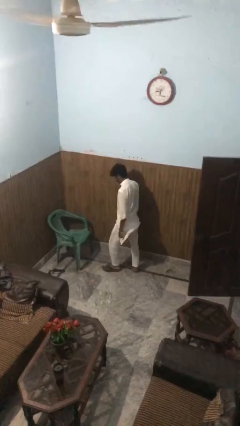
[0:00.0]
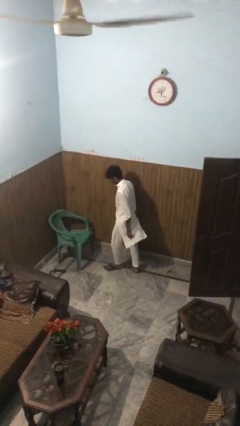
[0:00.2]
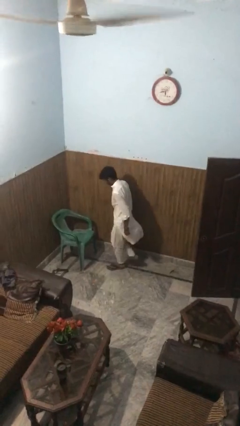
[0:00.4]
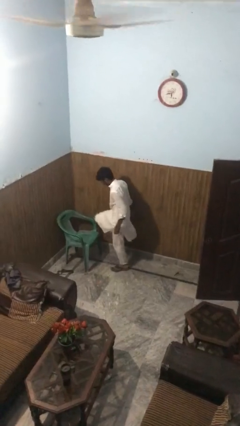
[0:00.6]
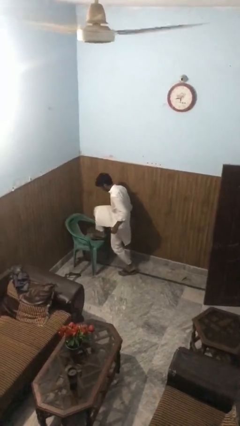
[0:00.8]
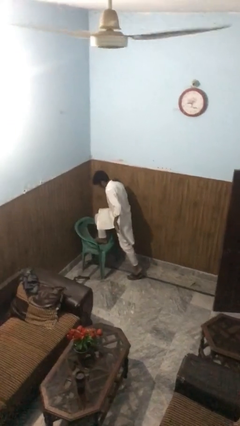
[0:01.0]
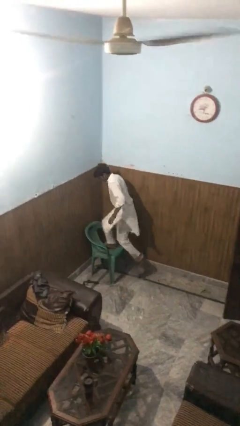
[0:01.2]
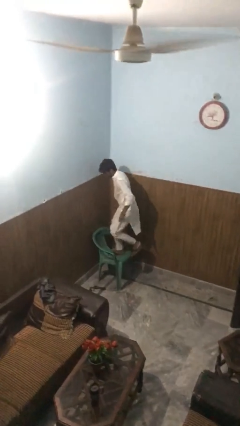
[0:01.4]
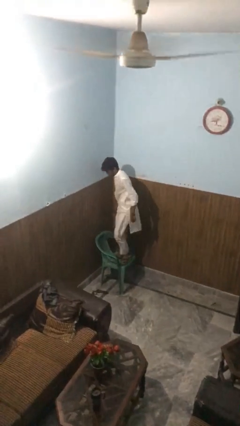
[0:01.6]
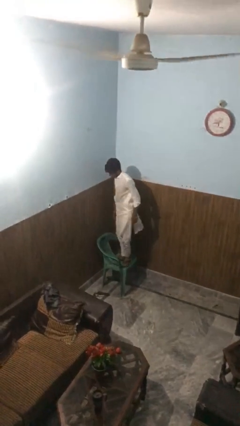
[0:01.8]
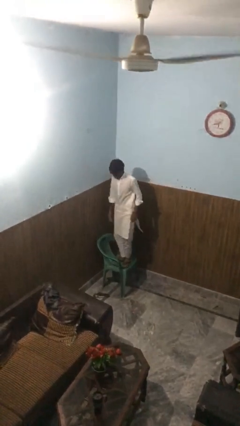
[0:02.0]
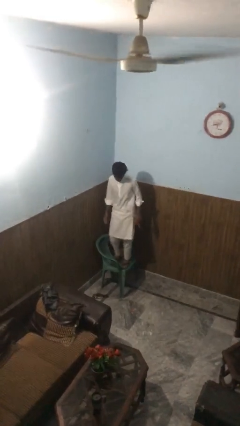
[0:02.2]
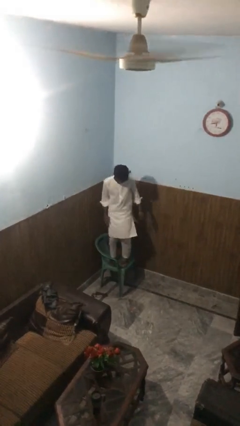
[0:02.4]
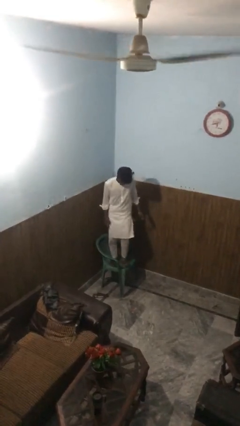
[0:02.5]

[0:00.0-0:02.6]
person climbs on chair

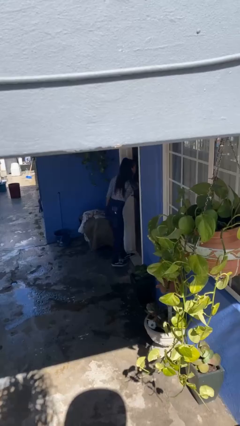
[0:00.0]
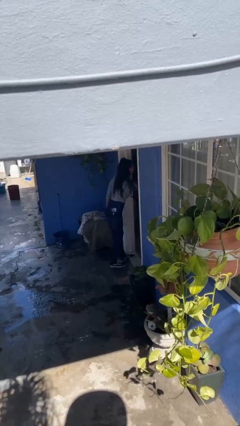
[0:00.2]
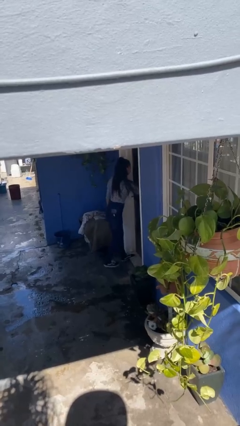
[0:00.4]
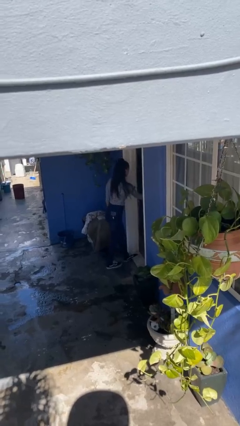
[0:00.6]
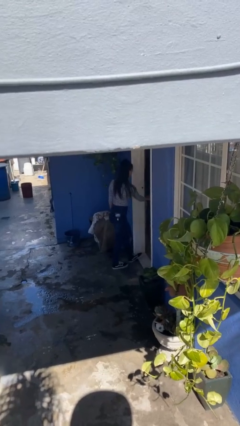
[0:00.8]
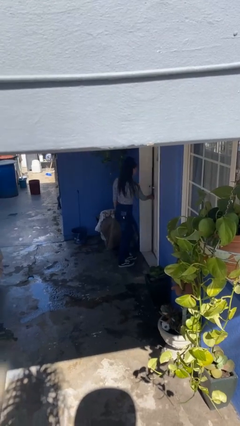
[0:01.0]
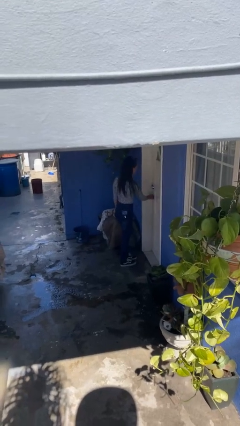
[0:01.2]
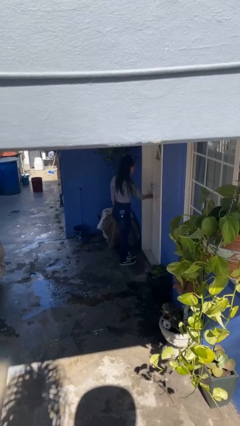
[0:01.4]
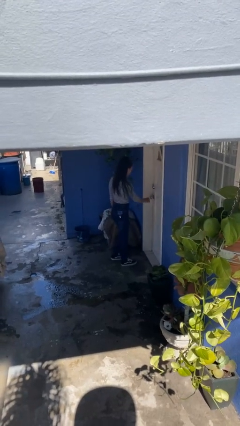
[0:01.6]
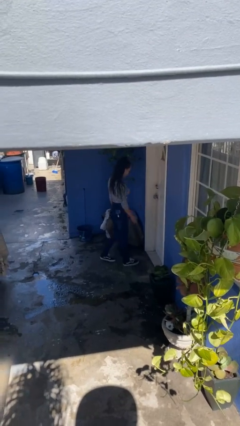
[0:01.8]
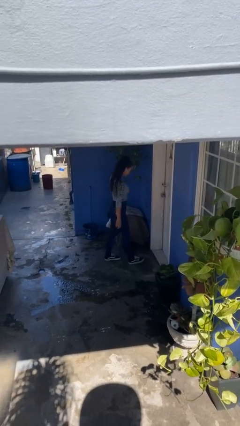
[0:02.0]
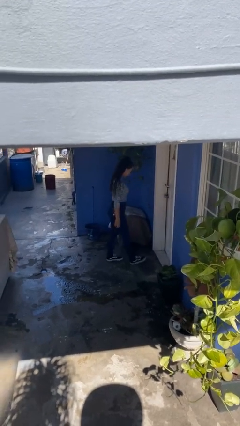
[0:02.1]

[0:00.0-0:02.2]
person closes facility door

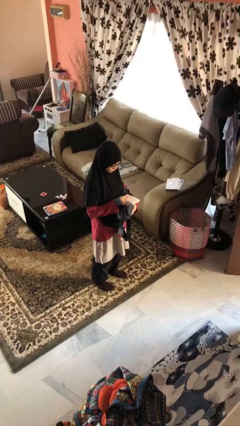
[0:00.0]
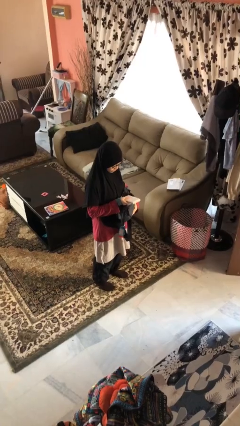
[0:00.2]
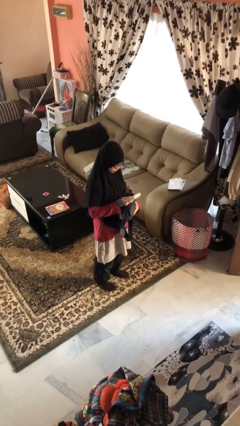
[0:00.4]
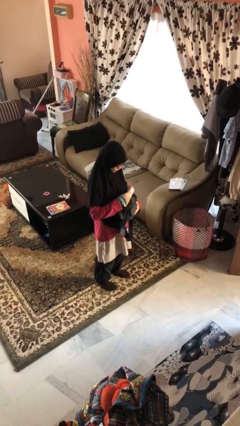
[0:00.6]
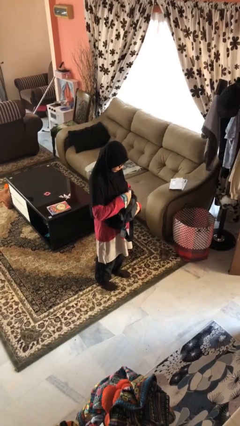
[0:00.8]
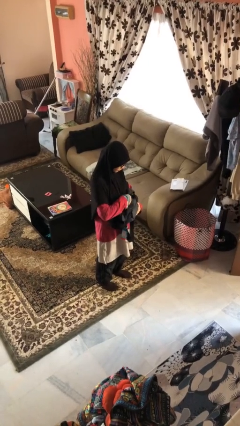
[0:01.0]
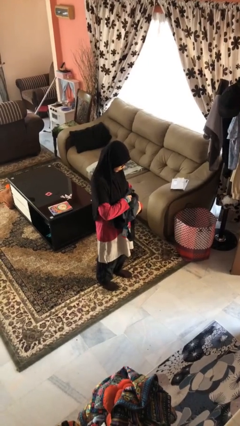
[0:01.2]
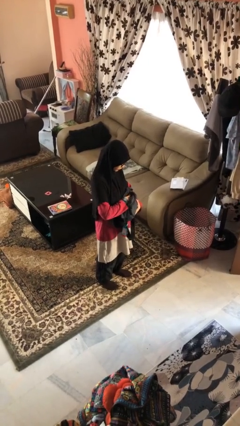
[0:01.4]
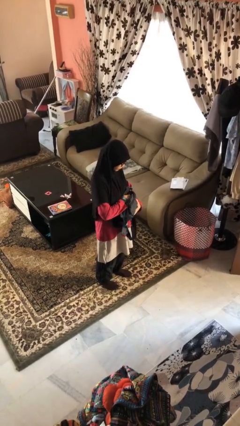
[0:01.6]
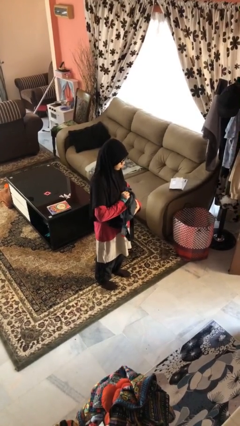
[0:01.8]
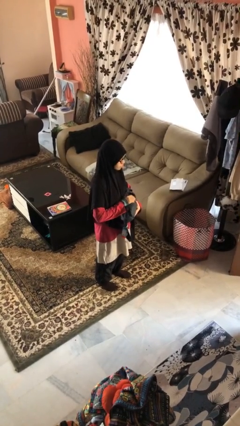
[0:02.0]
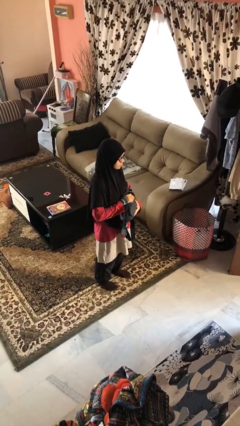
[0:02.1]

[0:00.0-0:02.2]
person puts object into purse

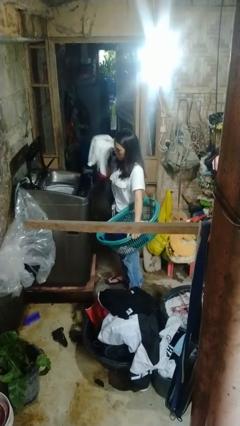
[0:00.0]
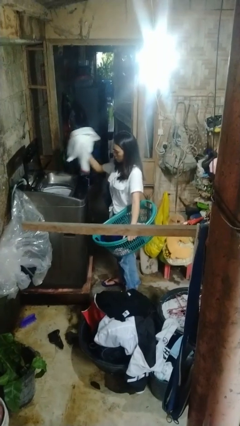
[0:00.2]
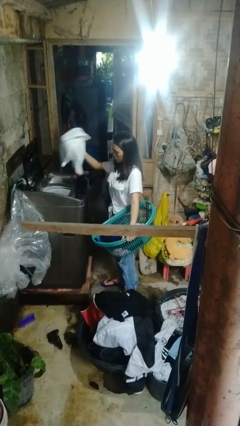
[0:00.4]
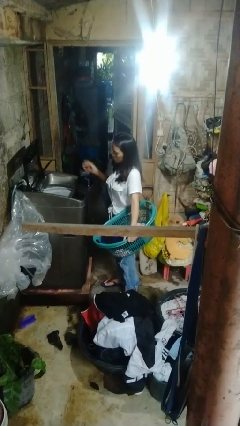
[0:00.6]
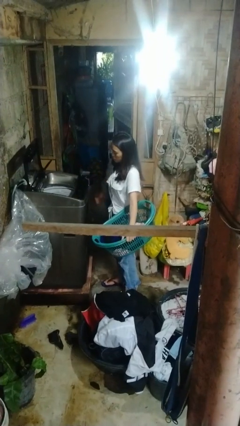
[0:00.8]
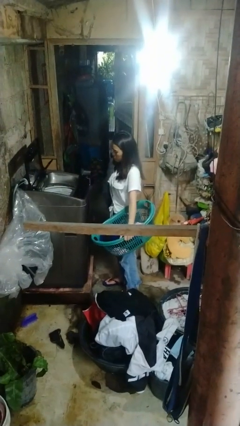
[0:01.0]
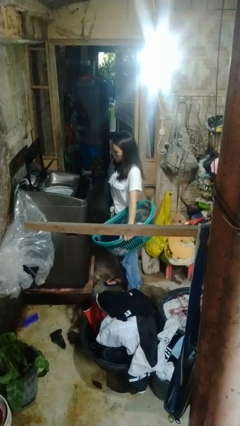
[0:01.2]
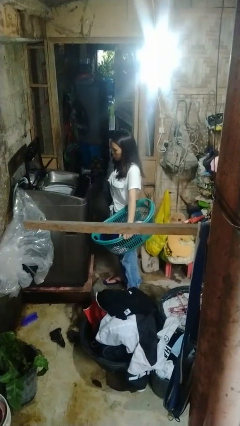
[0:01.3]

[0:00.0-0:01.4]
person loads clotheswasher

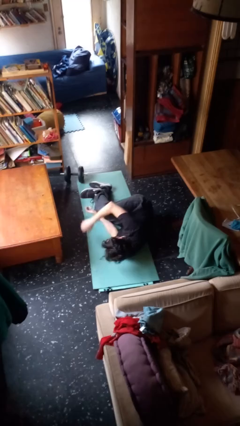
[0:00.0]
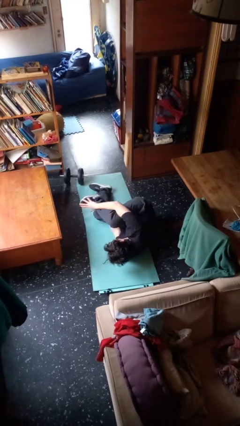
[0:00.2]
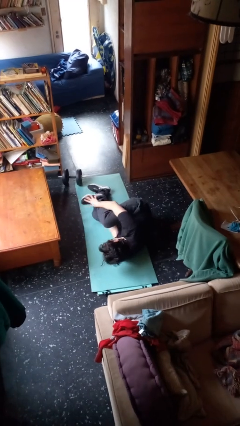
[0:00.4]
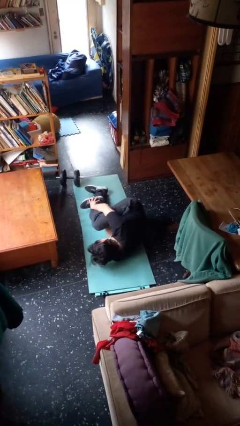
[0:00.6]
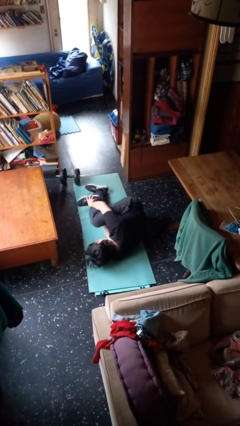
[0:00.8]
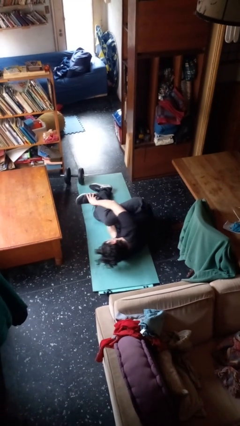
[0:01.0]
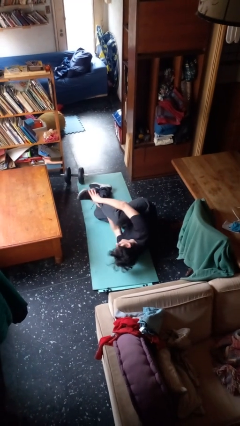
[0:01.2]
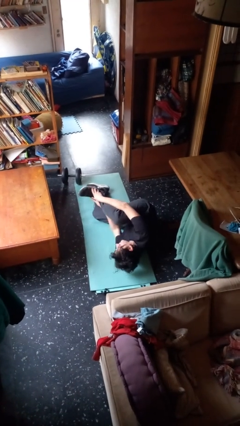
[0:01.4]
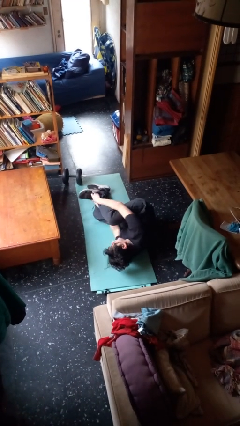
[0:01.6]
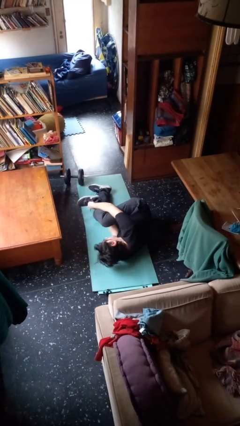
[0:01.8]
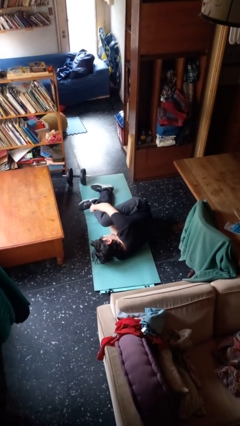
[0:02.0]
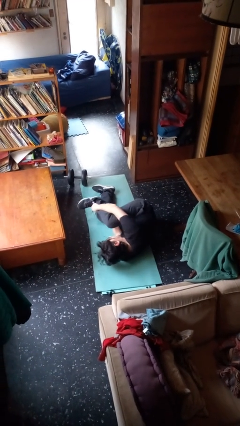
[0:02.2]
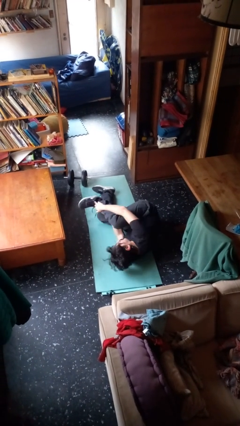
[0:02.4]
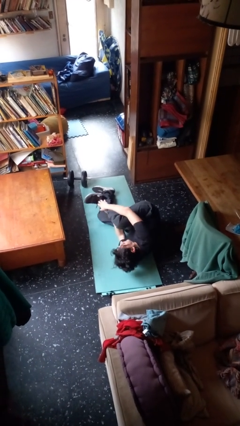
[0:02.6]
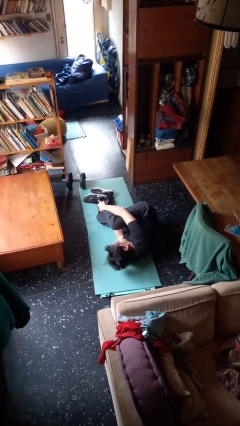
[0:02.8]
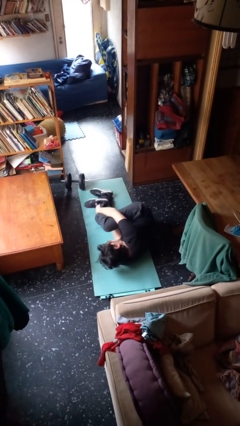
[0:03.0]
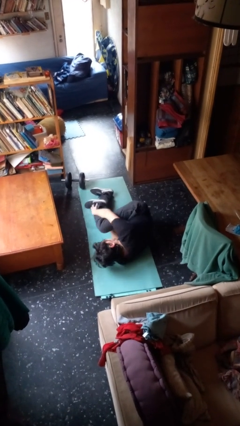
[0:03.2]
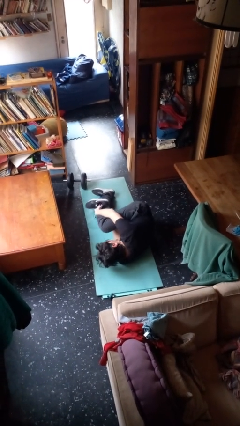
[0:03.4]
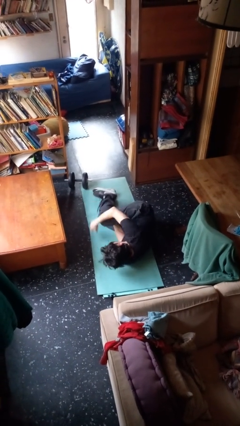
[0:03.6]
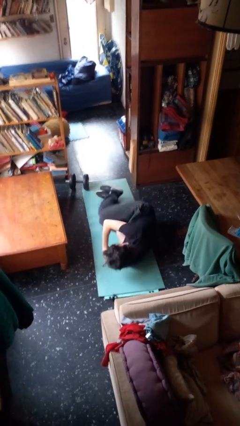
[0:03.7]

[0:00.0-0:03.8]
person lies down on floor

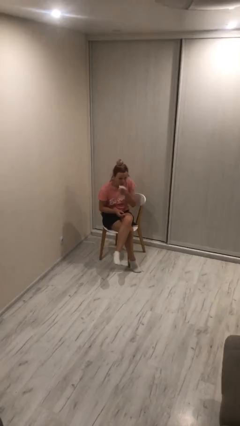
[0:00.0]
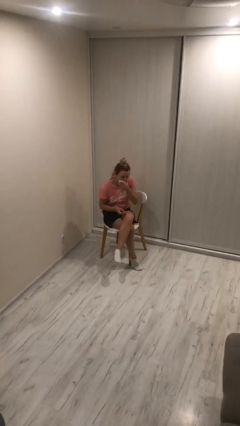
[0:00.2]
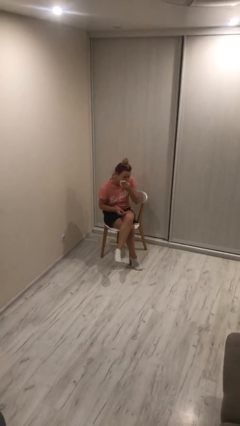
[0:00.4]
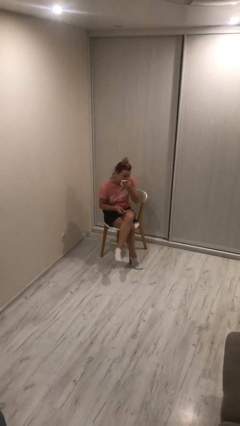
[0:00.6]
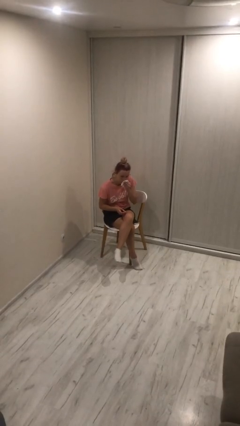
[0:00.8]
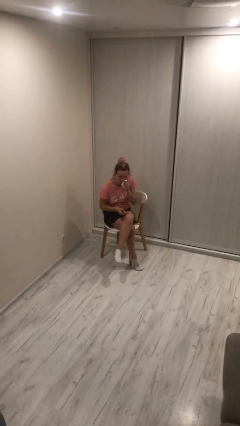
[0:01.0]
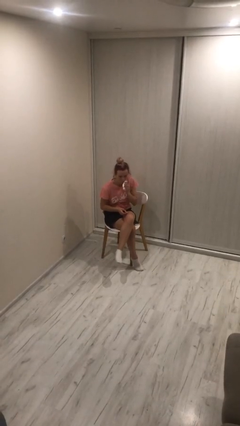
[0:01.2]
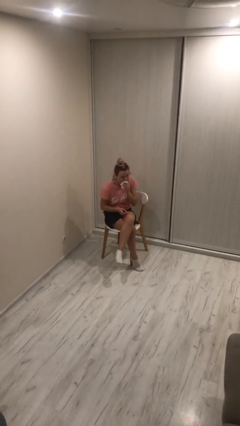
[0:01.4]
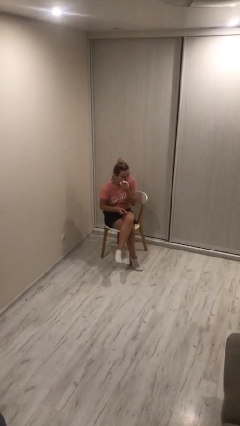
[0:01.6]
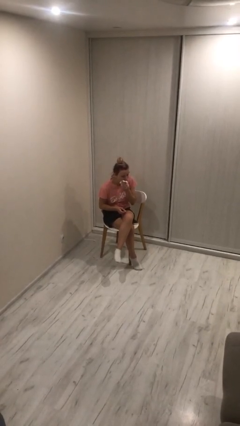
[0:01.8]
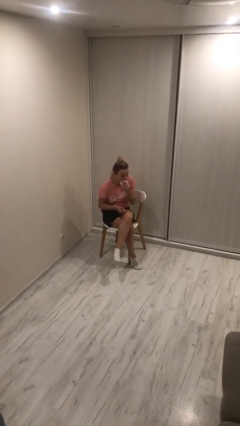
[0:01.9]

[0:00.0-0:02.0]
person wipes mouth with napkin

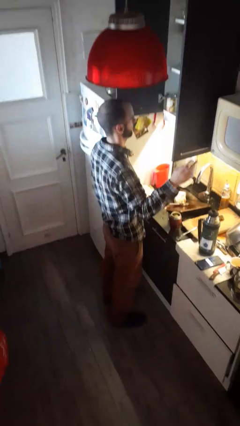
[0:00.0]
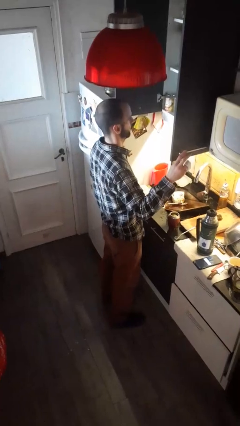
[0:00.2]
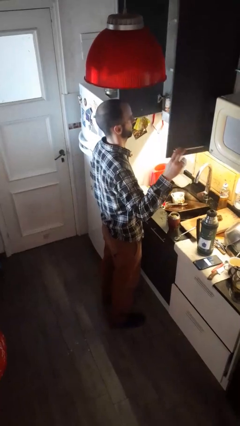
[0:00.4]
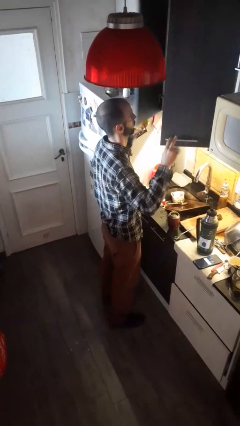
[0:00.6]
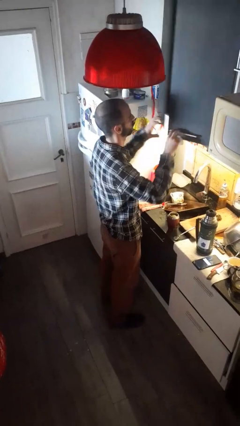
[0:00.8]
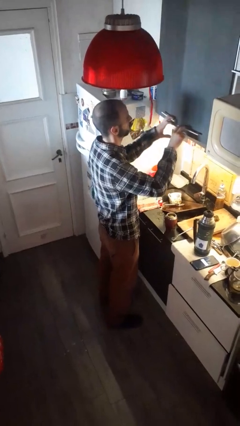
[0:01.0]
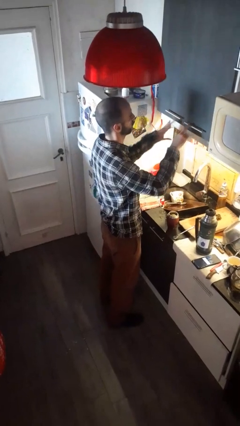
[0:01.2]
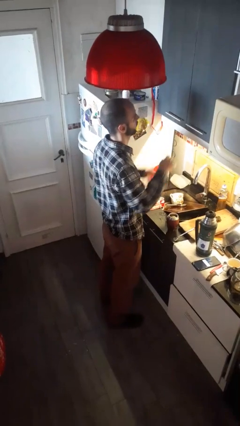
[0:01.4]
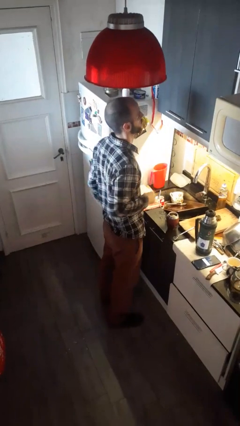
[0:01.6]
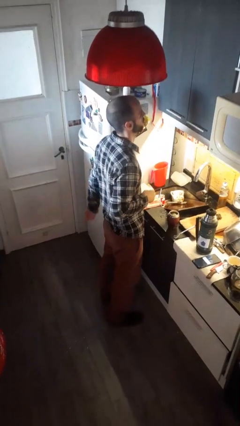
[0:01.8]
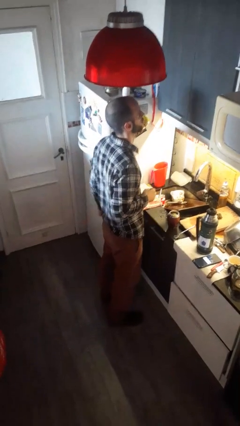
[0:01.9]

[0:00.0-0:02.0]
person closes kitchen drawer

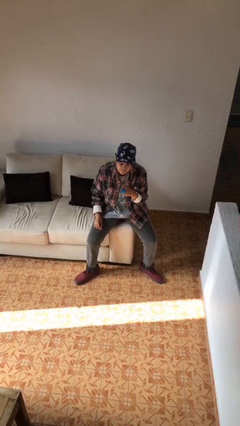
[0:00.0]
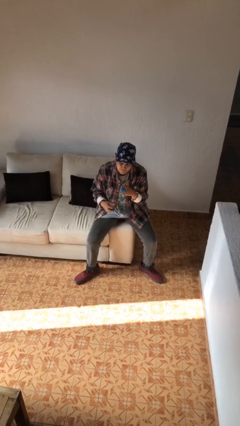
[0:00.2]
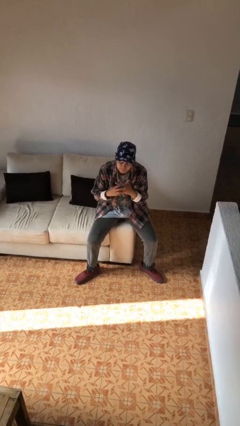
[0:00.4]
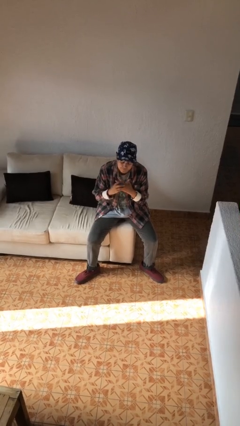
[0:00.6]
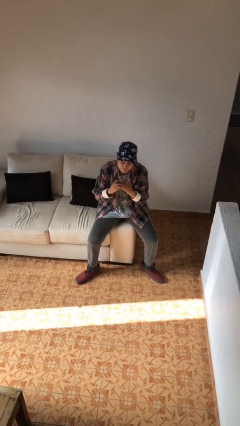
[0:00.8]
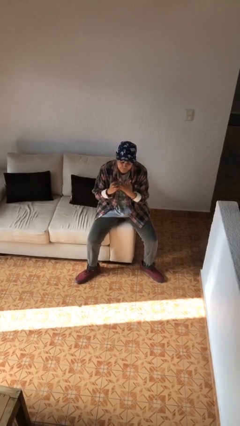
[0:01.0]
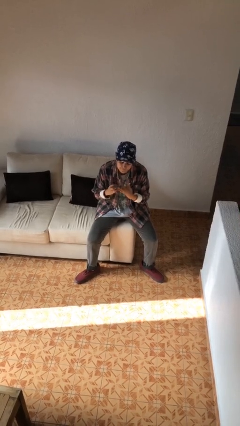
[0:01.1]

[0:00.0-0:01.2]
person takes off ring
